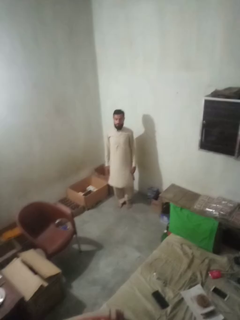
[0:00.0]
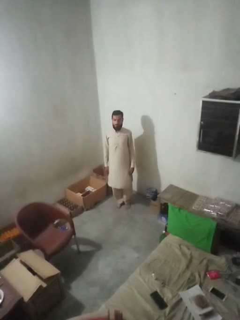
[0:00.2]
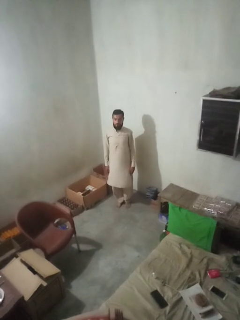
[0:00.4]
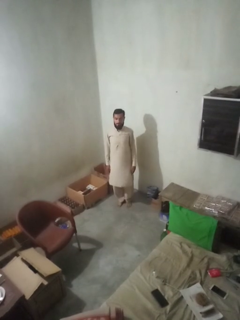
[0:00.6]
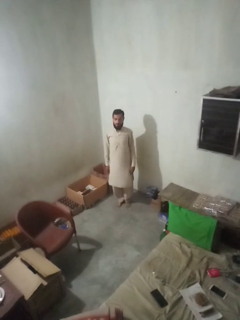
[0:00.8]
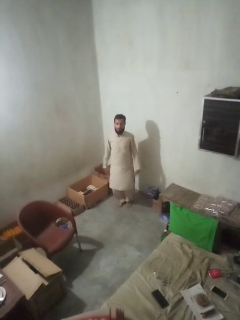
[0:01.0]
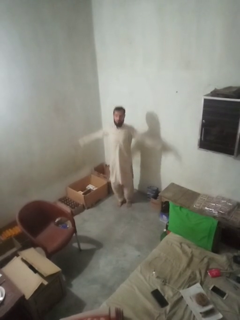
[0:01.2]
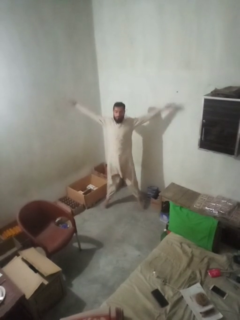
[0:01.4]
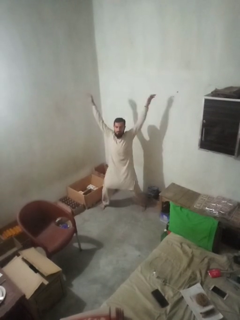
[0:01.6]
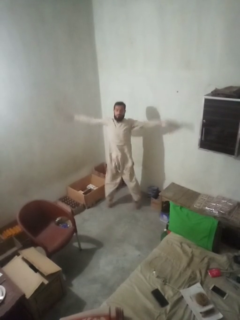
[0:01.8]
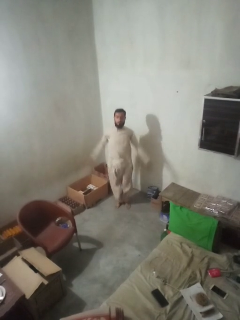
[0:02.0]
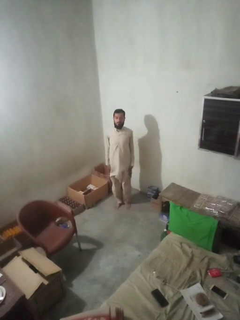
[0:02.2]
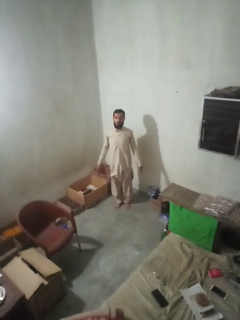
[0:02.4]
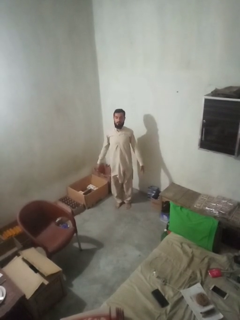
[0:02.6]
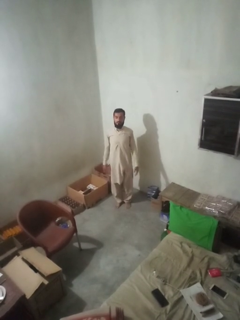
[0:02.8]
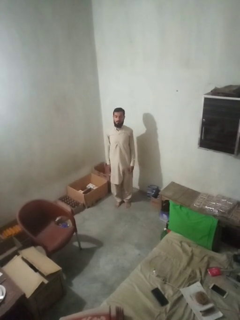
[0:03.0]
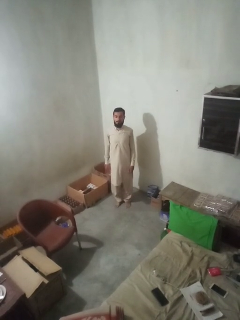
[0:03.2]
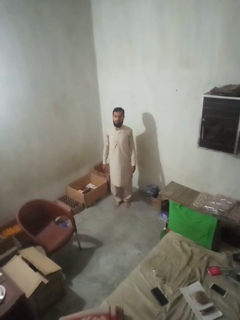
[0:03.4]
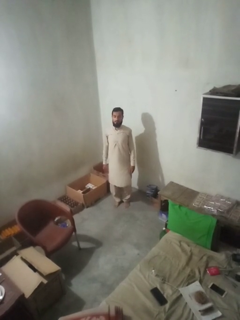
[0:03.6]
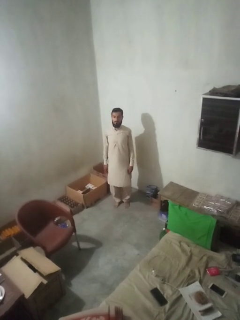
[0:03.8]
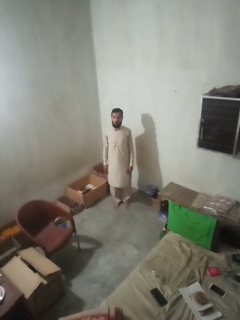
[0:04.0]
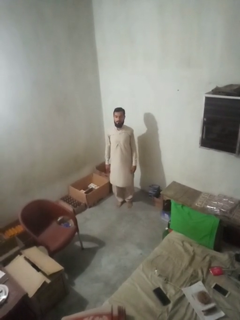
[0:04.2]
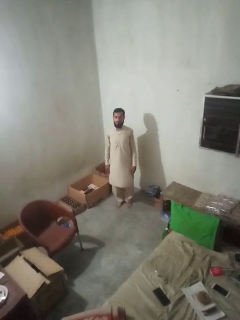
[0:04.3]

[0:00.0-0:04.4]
person exercises with jumping jacks

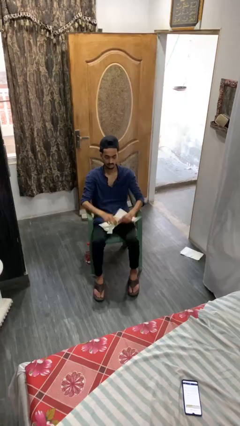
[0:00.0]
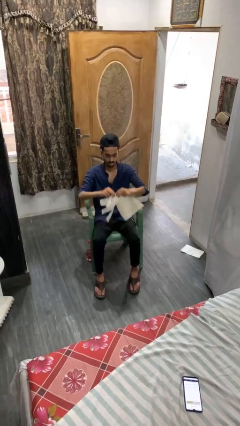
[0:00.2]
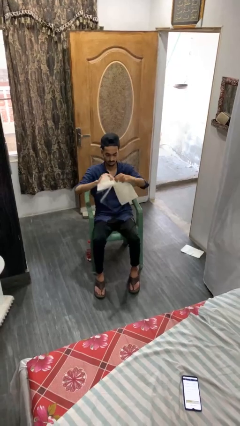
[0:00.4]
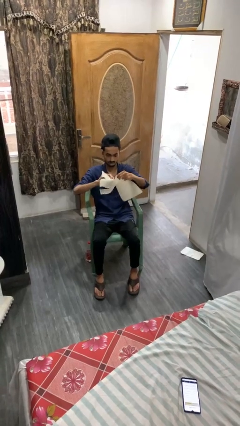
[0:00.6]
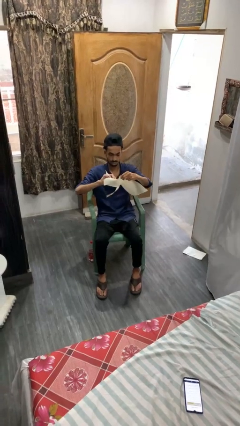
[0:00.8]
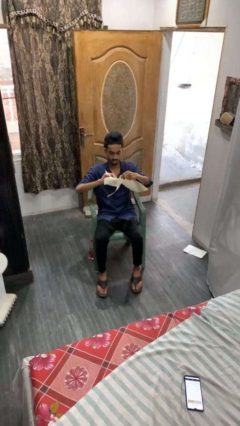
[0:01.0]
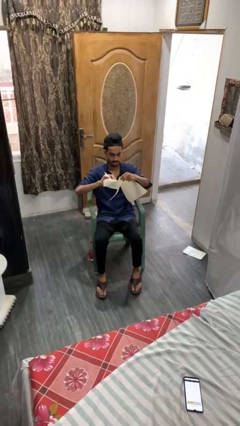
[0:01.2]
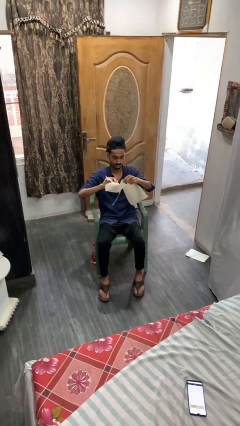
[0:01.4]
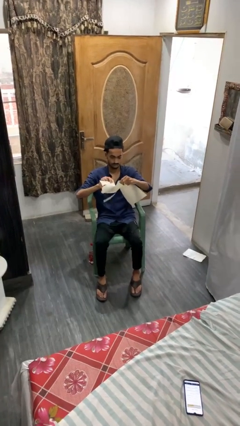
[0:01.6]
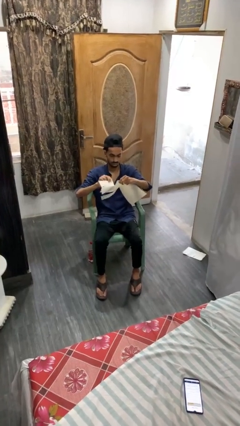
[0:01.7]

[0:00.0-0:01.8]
person tears paper

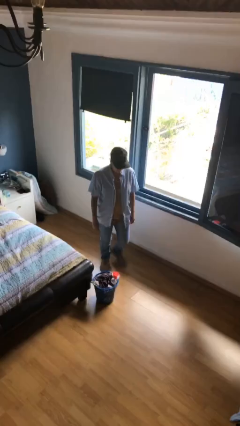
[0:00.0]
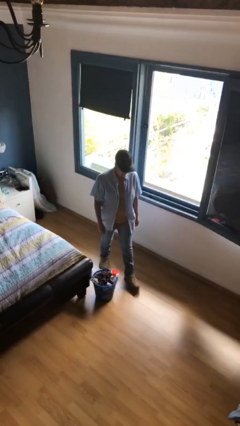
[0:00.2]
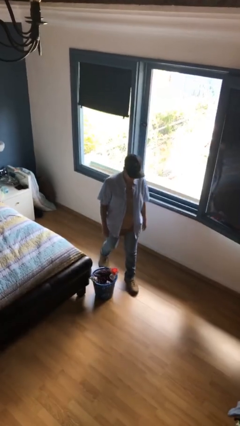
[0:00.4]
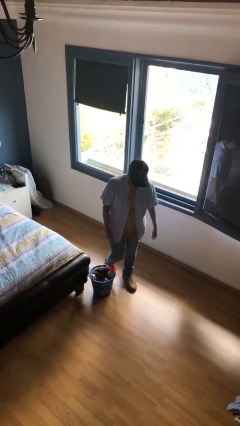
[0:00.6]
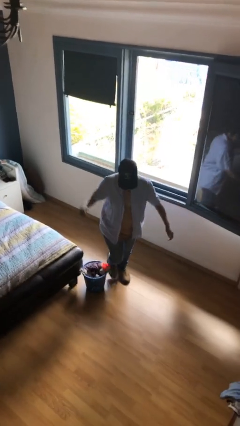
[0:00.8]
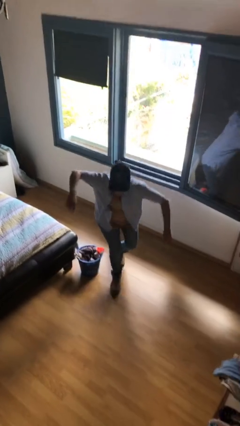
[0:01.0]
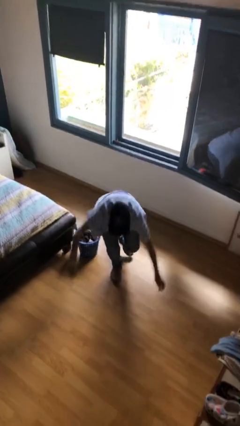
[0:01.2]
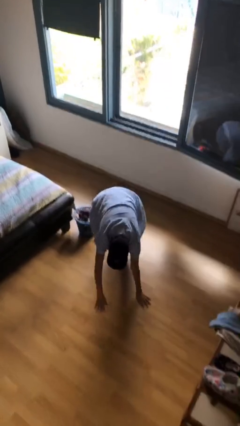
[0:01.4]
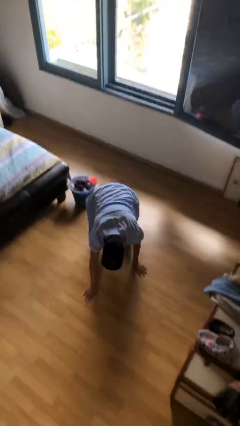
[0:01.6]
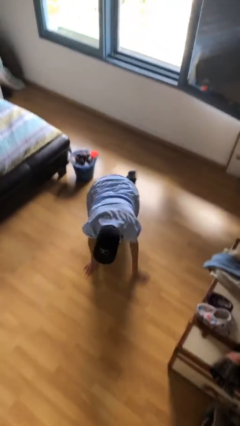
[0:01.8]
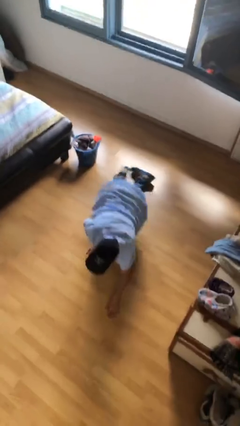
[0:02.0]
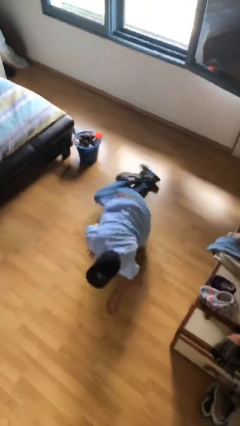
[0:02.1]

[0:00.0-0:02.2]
person trips on object on floor

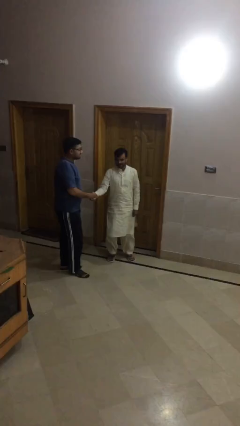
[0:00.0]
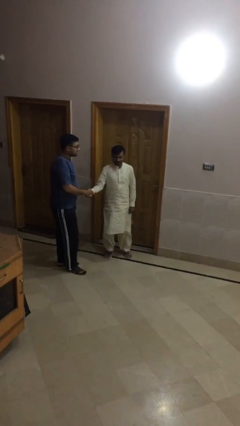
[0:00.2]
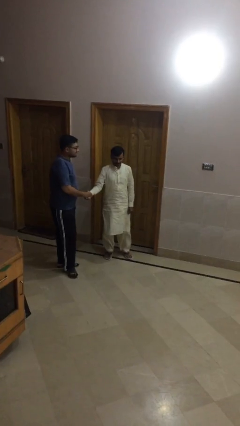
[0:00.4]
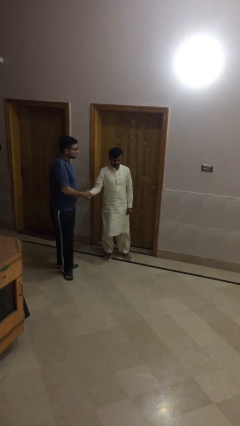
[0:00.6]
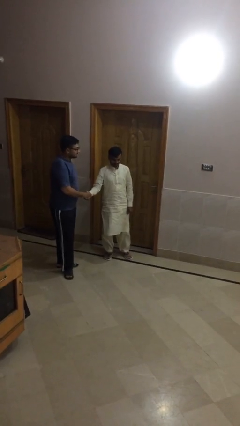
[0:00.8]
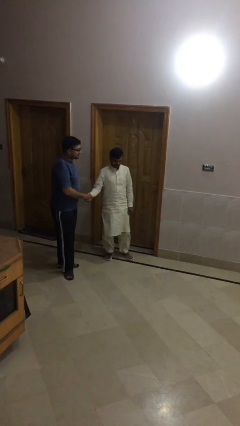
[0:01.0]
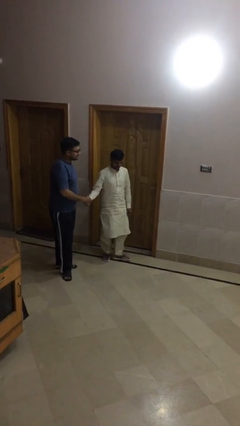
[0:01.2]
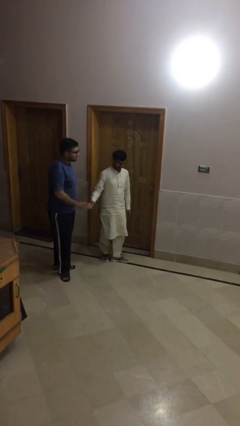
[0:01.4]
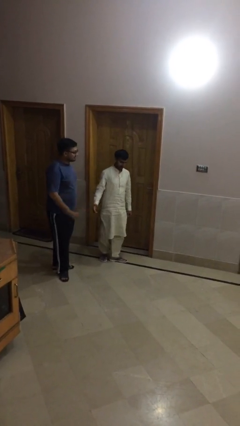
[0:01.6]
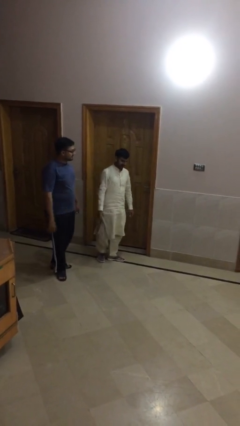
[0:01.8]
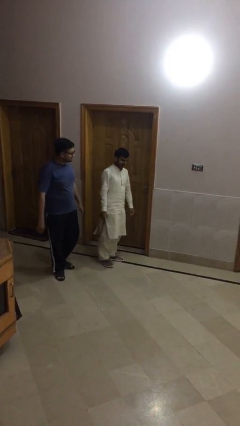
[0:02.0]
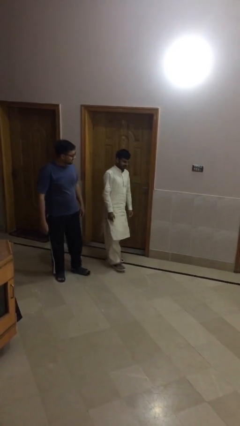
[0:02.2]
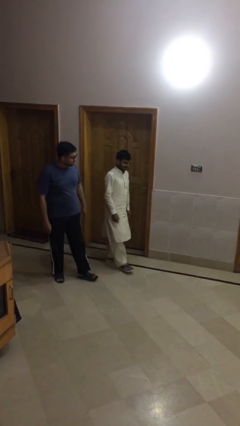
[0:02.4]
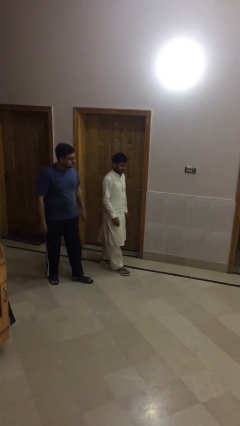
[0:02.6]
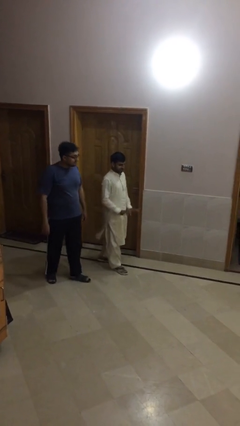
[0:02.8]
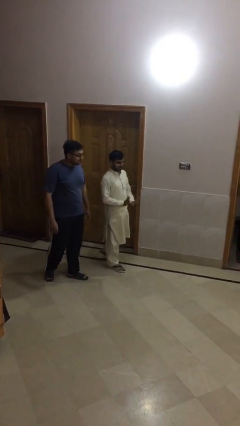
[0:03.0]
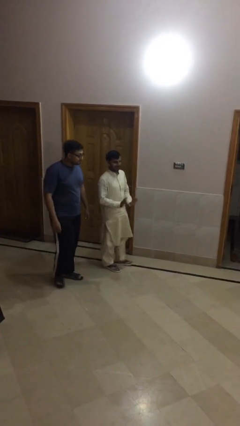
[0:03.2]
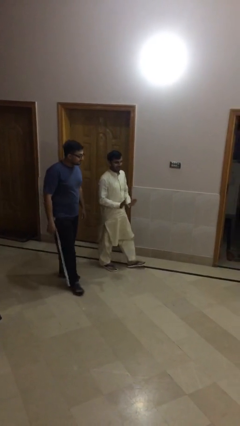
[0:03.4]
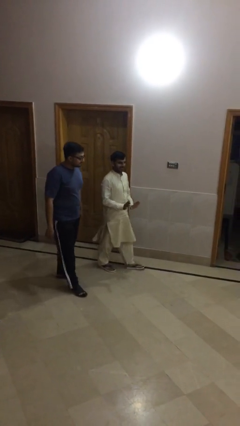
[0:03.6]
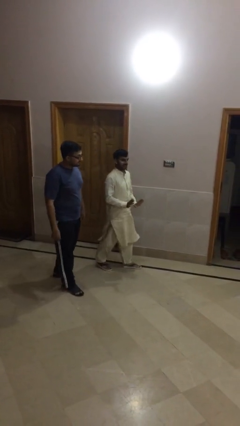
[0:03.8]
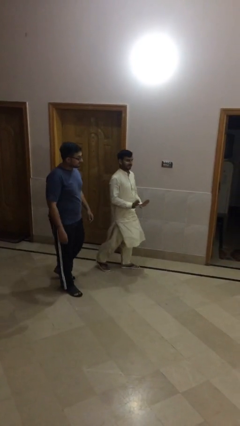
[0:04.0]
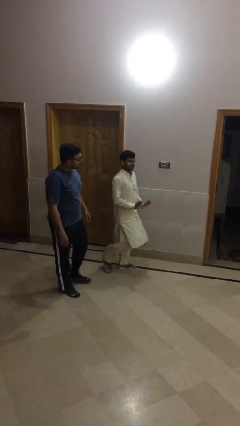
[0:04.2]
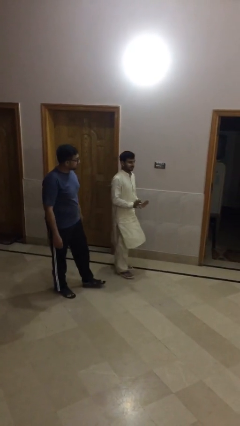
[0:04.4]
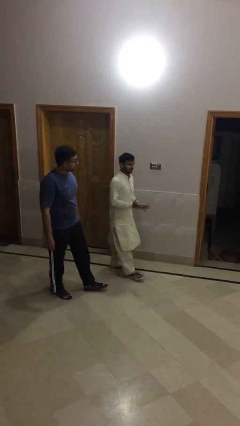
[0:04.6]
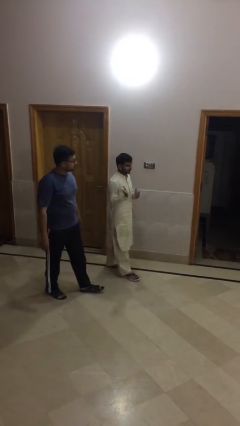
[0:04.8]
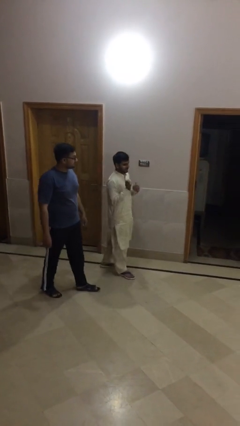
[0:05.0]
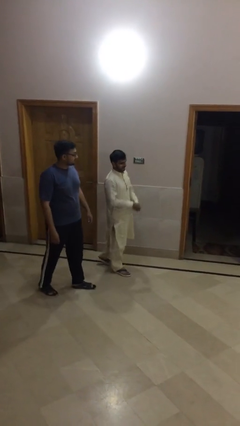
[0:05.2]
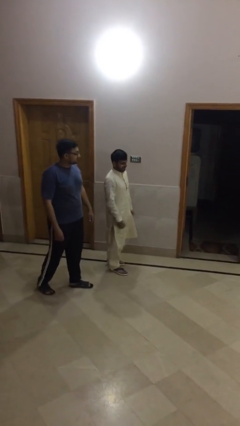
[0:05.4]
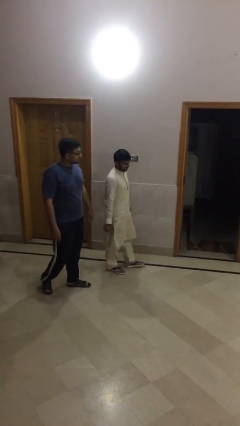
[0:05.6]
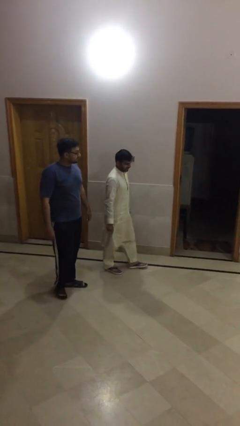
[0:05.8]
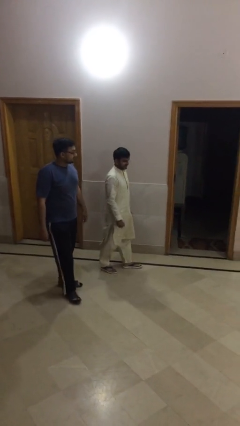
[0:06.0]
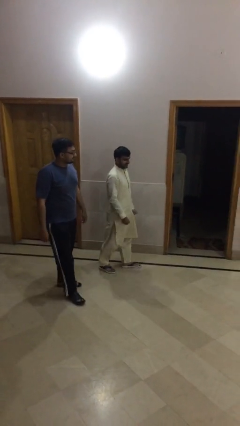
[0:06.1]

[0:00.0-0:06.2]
person talks to person

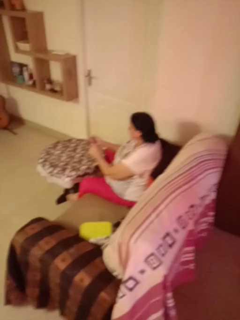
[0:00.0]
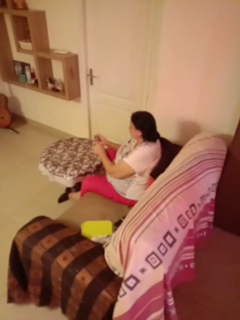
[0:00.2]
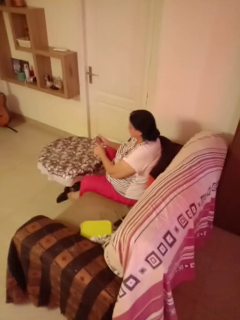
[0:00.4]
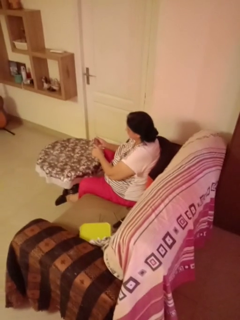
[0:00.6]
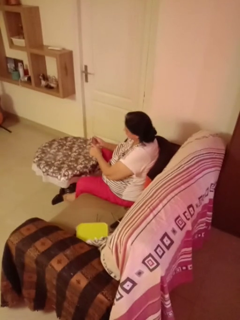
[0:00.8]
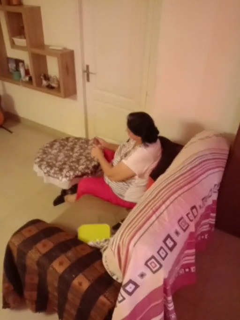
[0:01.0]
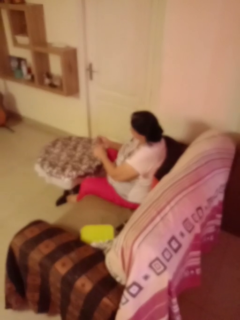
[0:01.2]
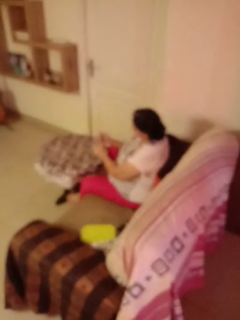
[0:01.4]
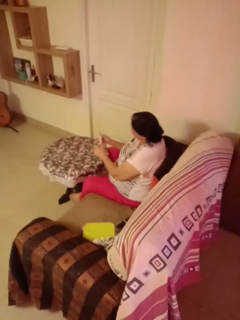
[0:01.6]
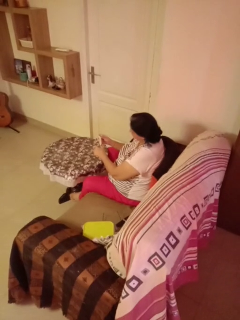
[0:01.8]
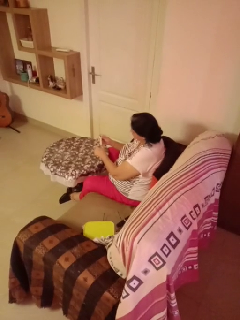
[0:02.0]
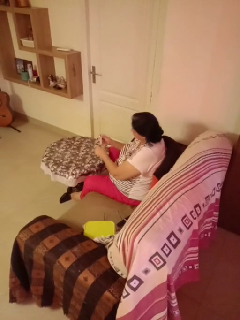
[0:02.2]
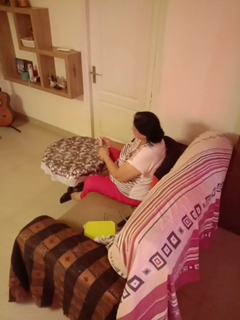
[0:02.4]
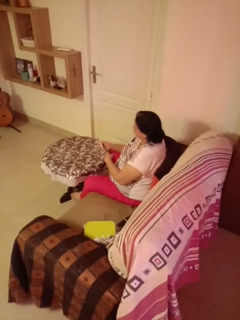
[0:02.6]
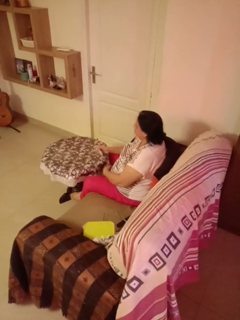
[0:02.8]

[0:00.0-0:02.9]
person clips fingernails

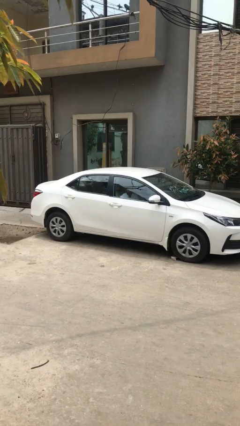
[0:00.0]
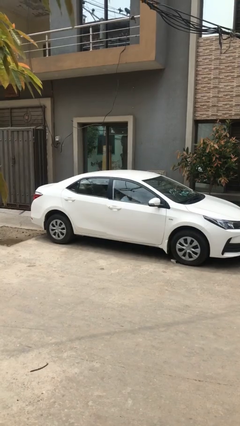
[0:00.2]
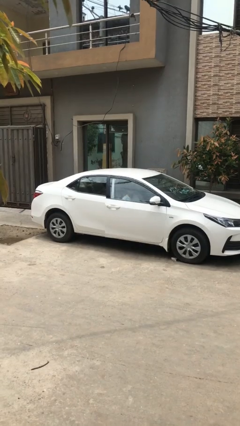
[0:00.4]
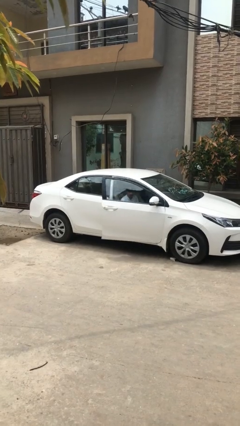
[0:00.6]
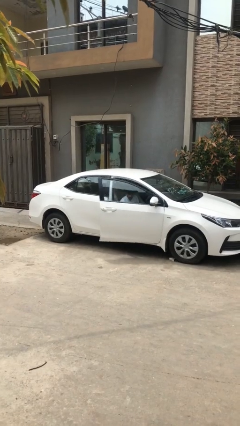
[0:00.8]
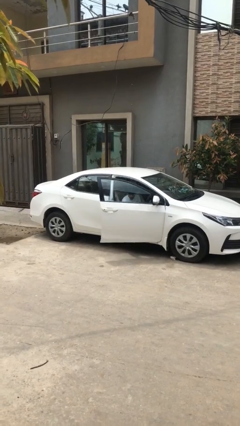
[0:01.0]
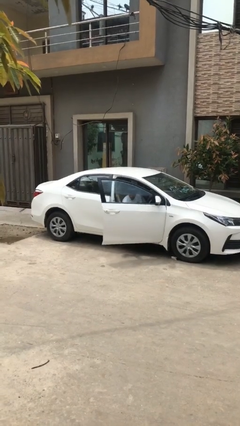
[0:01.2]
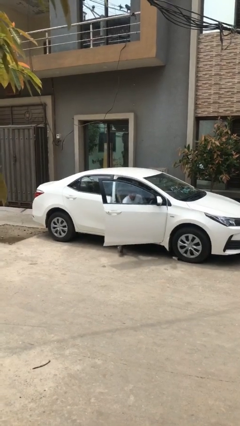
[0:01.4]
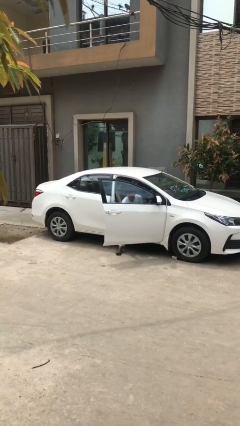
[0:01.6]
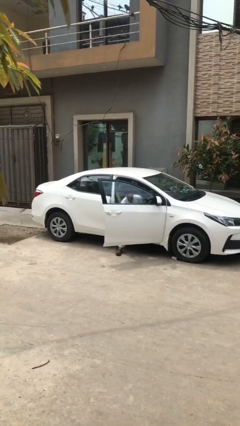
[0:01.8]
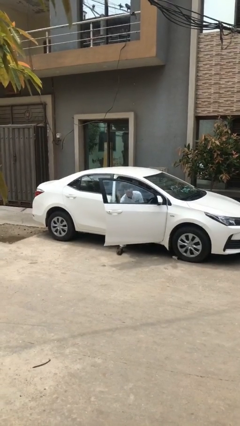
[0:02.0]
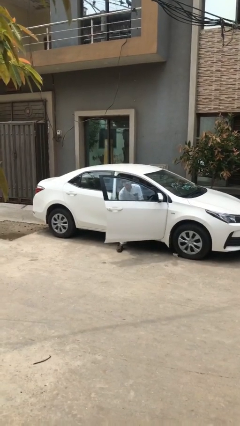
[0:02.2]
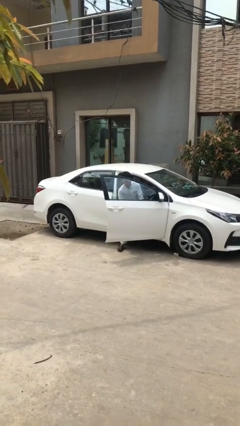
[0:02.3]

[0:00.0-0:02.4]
person opens car door
